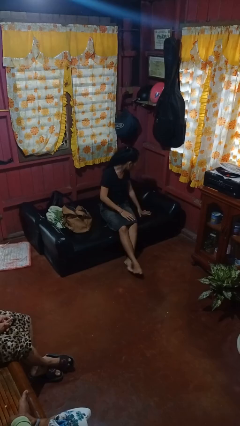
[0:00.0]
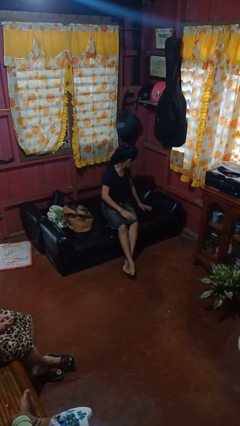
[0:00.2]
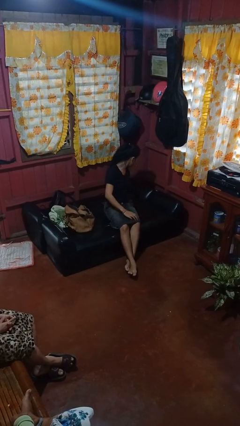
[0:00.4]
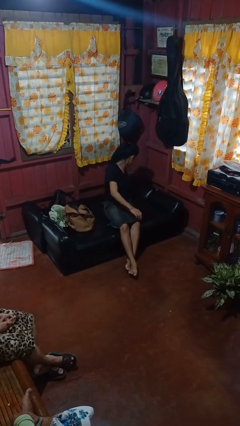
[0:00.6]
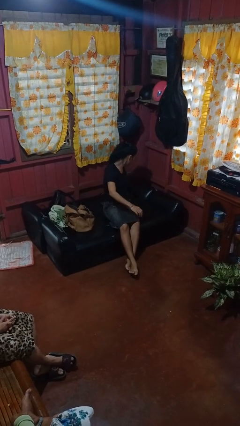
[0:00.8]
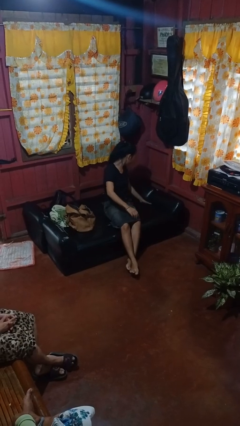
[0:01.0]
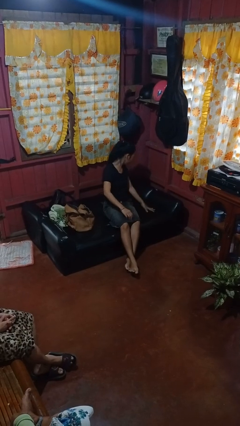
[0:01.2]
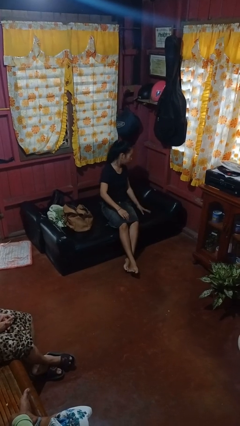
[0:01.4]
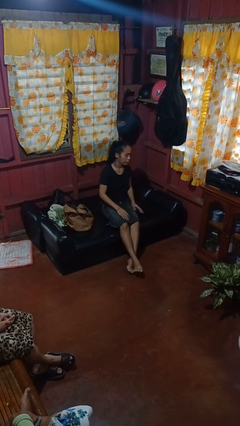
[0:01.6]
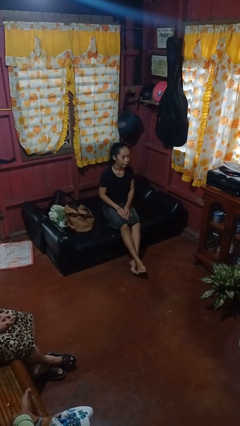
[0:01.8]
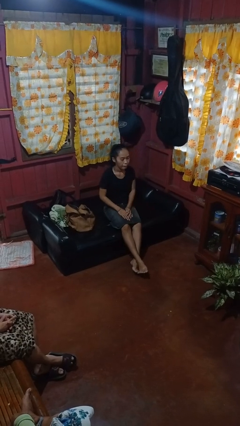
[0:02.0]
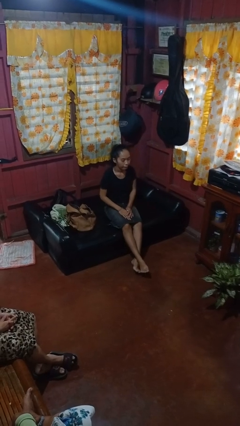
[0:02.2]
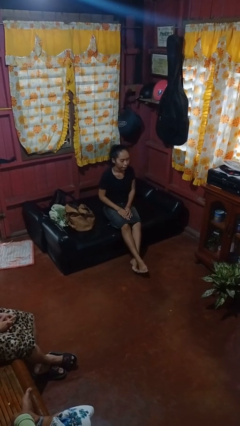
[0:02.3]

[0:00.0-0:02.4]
person searches in couch

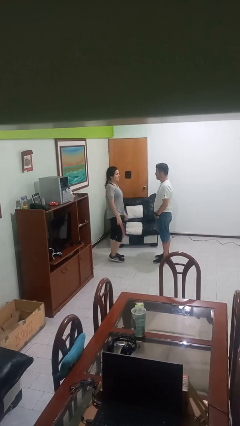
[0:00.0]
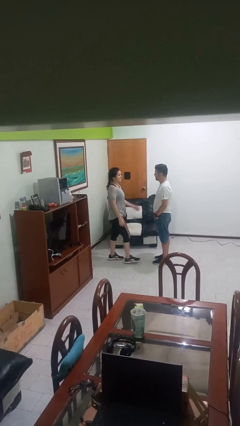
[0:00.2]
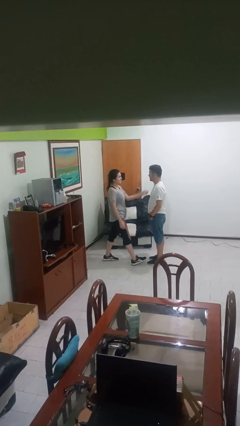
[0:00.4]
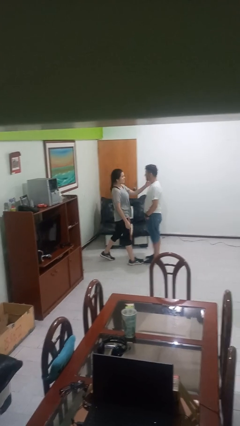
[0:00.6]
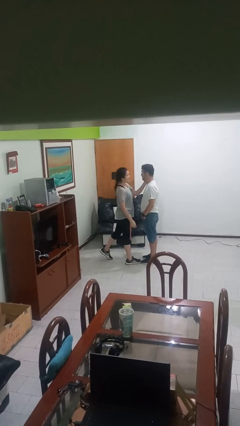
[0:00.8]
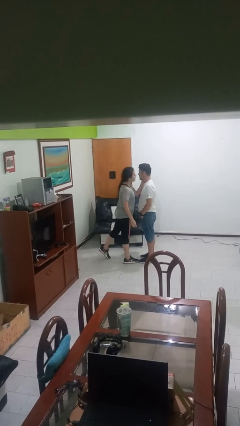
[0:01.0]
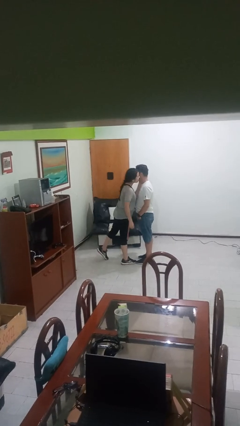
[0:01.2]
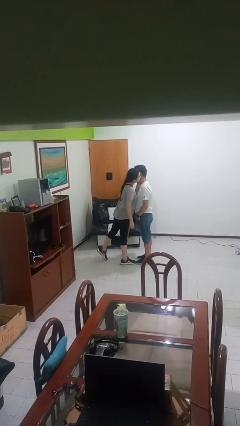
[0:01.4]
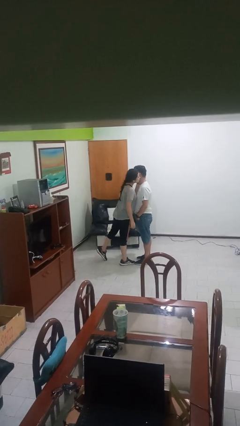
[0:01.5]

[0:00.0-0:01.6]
person kisses cheek of person

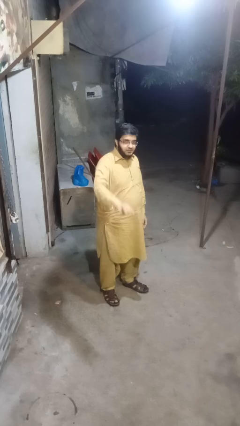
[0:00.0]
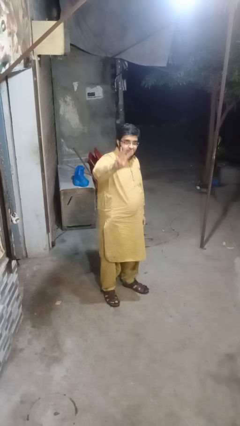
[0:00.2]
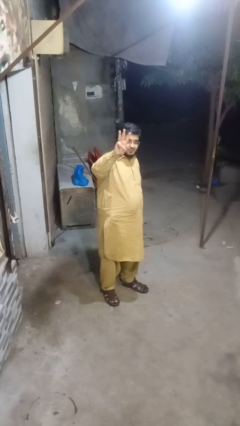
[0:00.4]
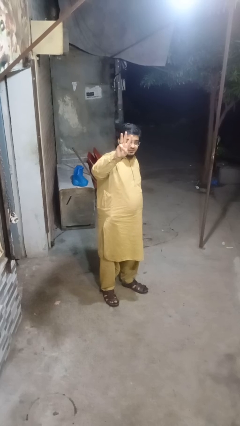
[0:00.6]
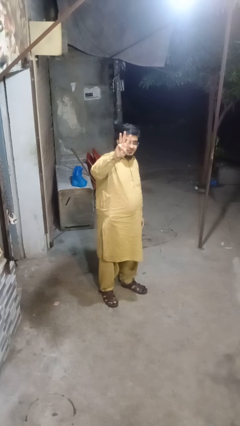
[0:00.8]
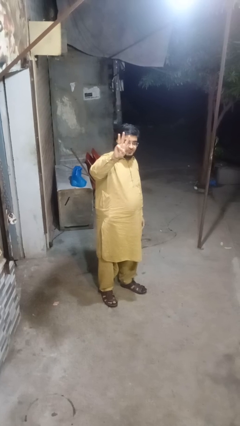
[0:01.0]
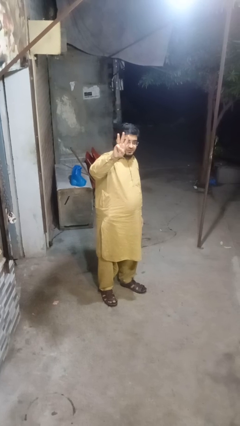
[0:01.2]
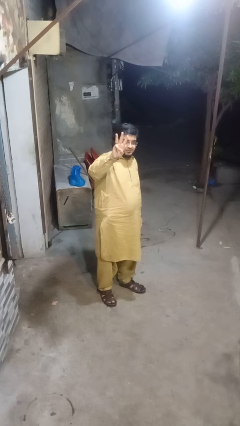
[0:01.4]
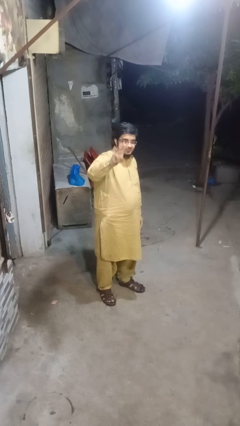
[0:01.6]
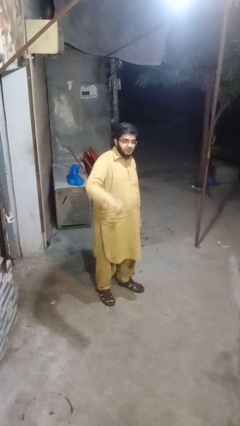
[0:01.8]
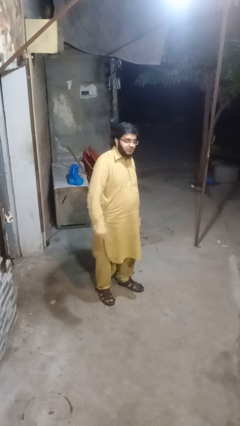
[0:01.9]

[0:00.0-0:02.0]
person gestures number three

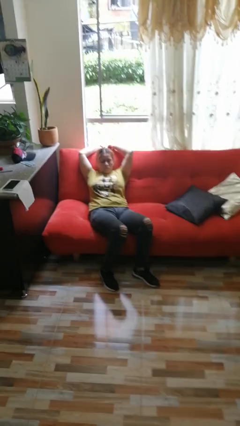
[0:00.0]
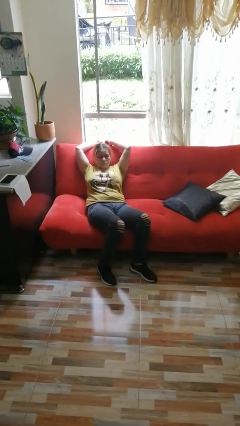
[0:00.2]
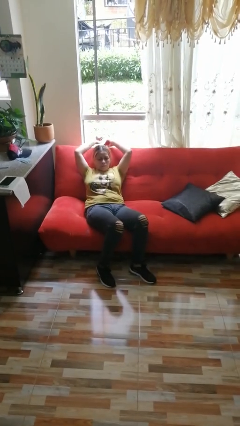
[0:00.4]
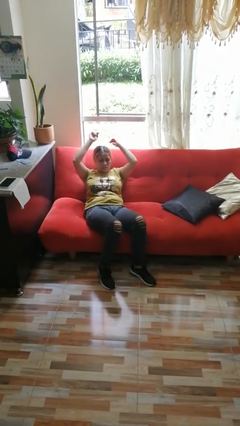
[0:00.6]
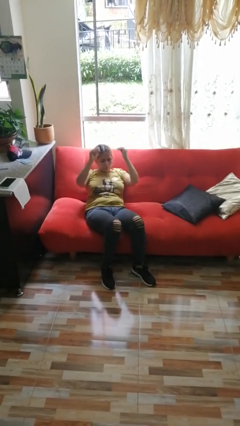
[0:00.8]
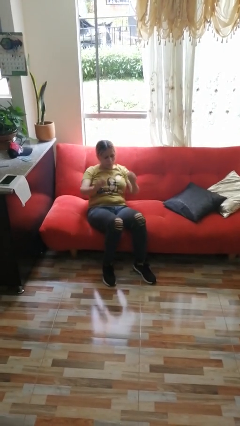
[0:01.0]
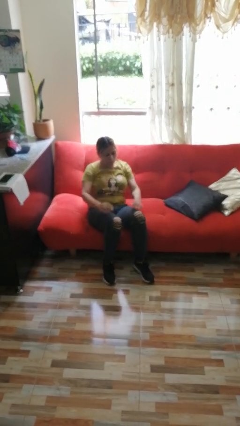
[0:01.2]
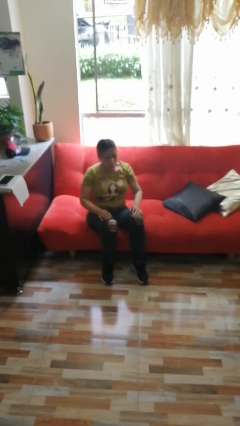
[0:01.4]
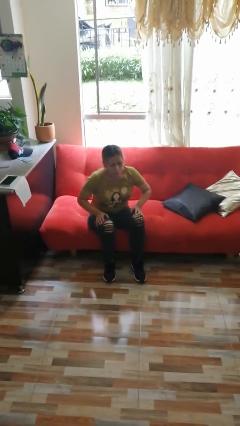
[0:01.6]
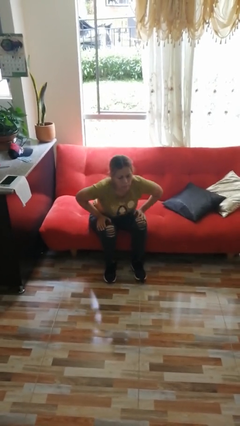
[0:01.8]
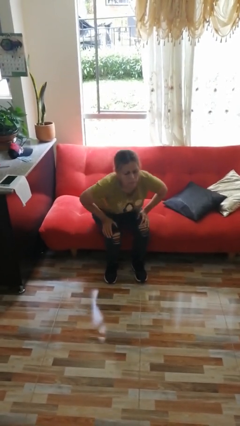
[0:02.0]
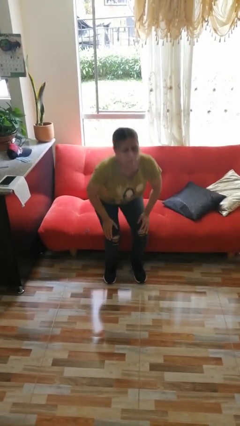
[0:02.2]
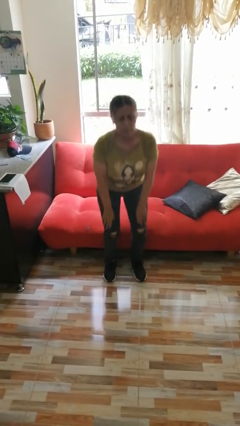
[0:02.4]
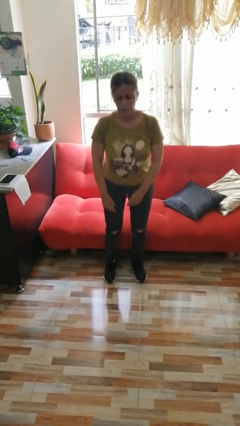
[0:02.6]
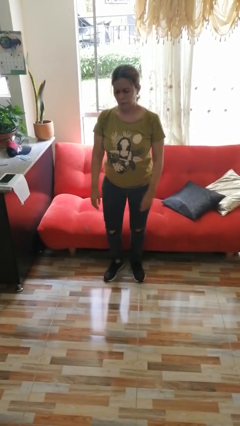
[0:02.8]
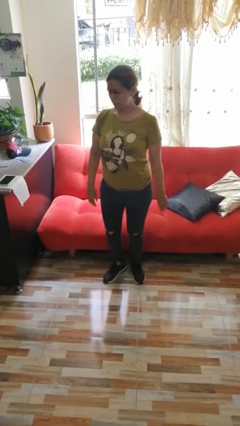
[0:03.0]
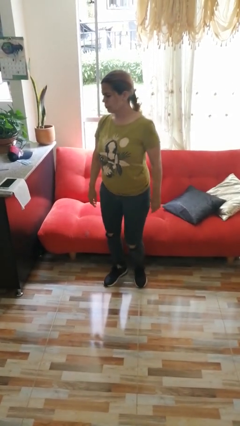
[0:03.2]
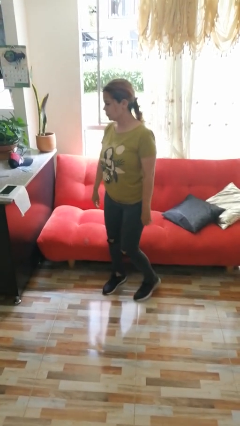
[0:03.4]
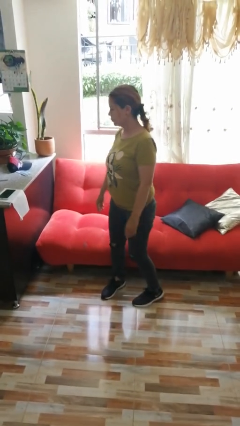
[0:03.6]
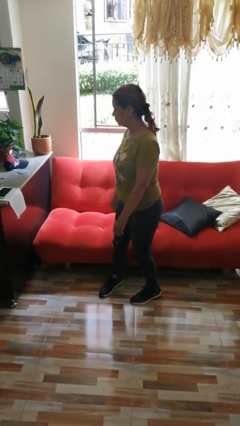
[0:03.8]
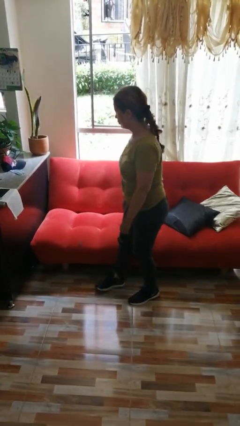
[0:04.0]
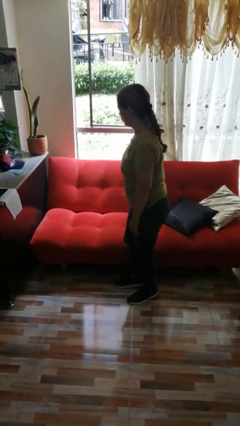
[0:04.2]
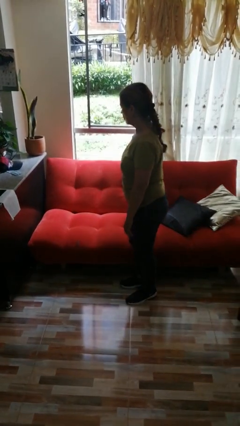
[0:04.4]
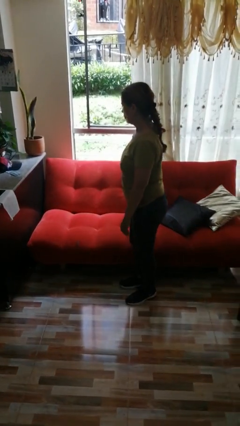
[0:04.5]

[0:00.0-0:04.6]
person stands up

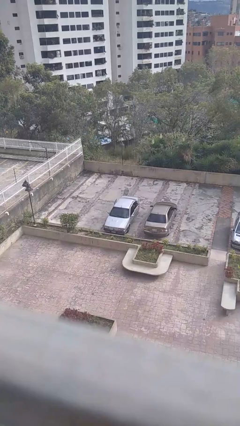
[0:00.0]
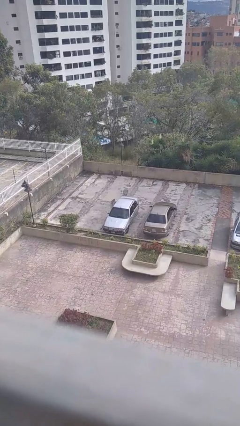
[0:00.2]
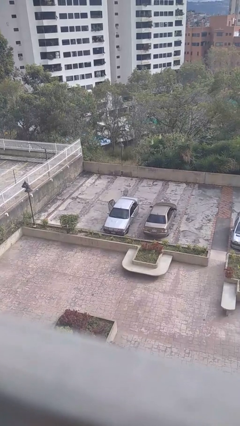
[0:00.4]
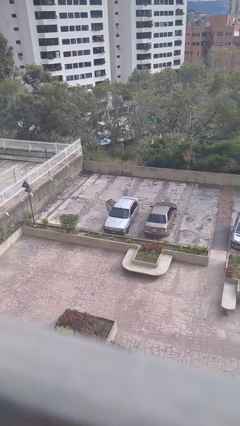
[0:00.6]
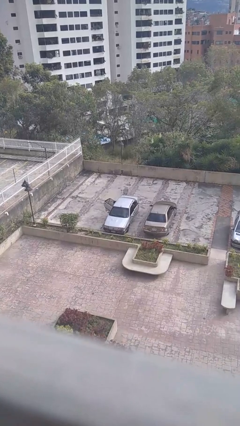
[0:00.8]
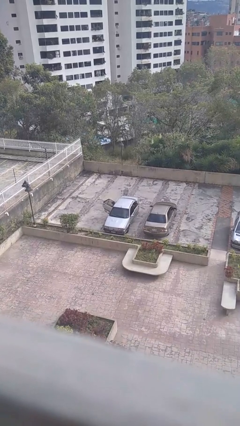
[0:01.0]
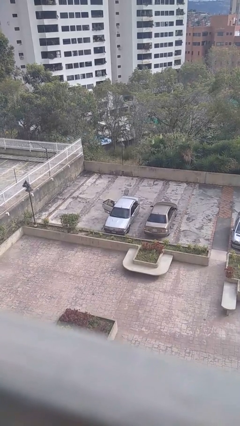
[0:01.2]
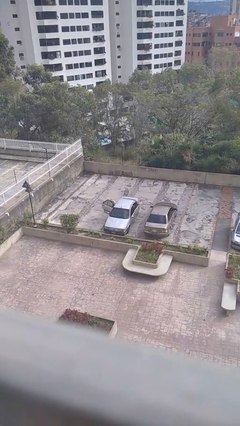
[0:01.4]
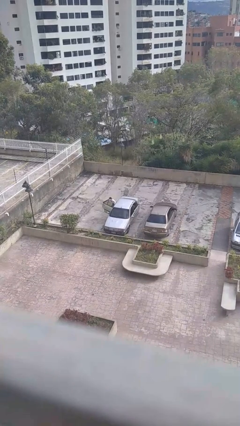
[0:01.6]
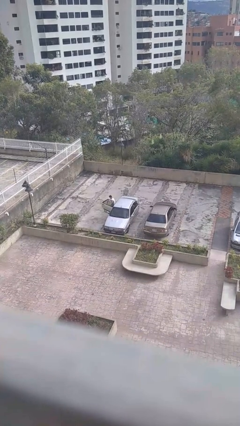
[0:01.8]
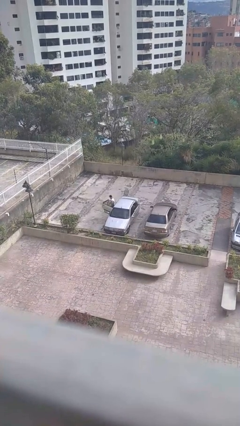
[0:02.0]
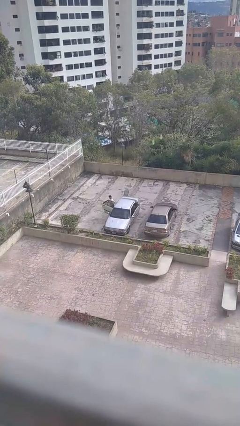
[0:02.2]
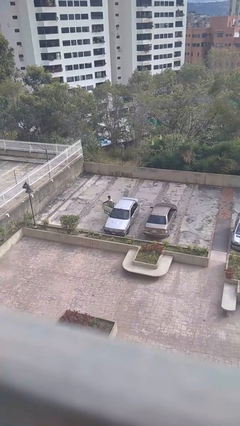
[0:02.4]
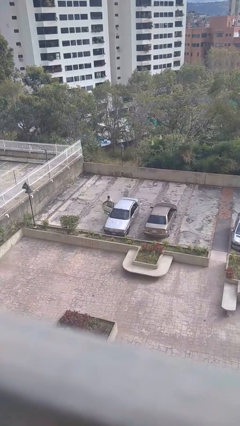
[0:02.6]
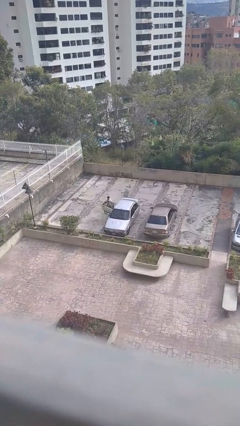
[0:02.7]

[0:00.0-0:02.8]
car drops off person

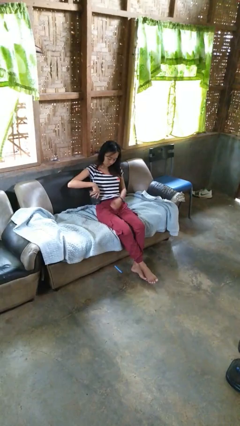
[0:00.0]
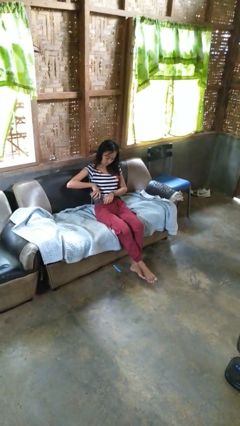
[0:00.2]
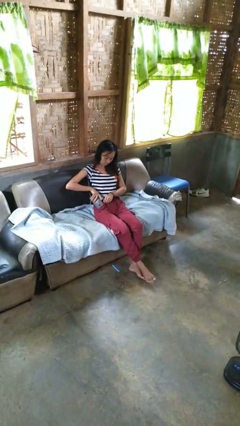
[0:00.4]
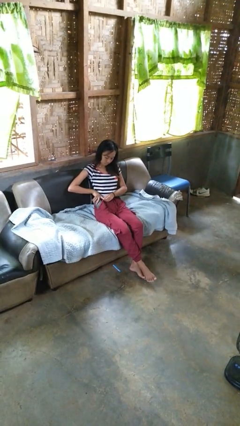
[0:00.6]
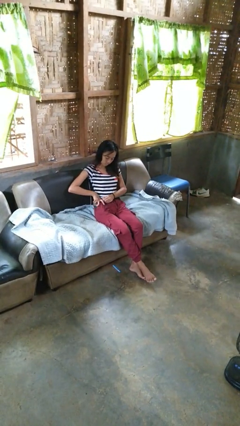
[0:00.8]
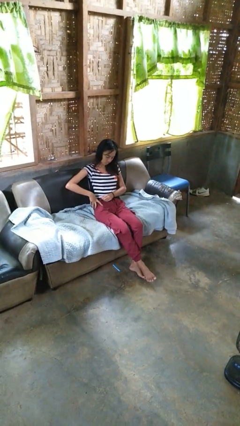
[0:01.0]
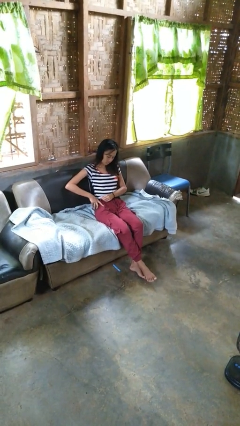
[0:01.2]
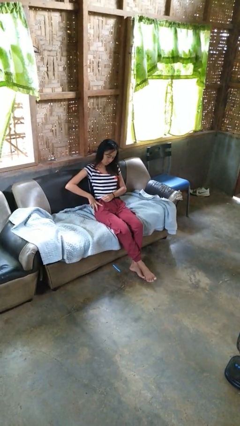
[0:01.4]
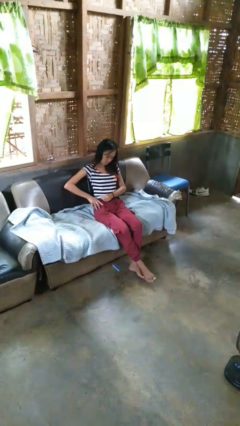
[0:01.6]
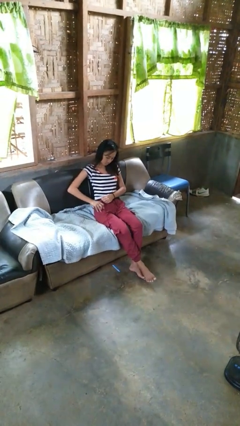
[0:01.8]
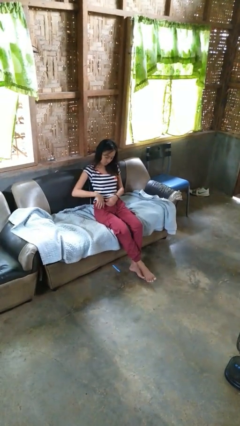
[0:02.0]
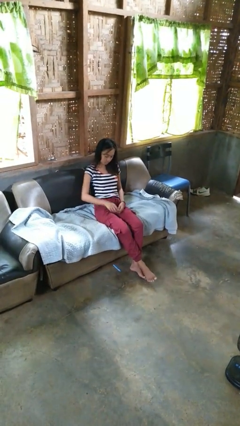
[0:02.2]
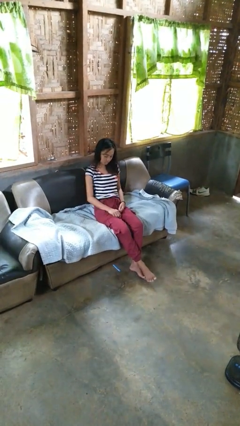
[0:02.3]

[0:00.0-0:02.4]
person puts phone into pocket

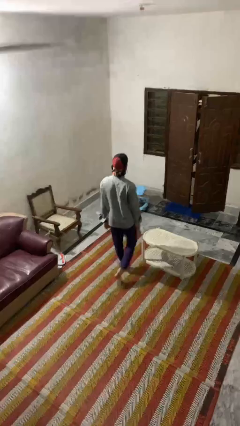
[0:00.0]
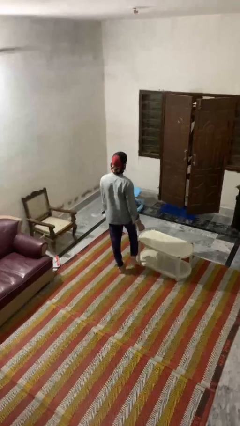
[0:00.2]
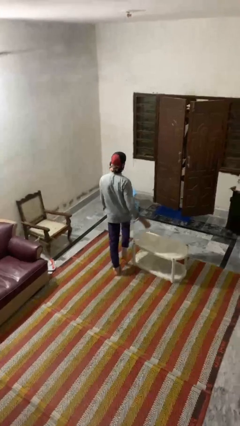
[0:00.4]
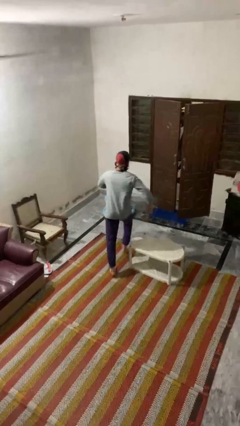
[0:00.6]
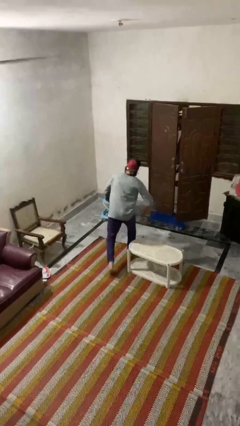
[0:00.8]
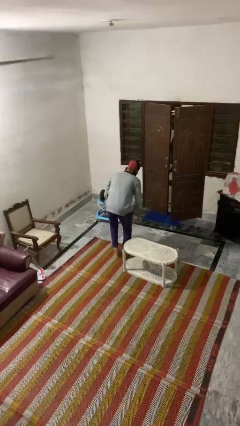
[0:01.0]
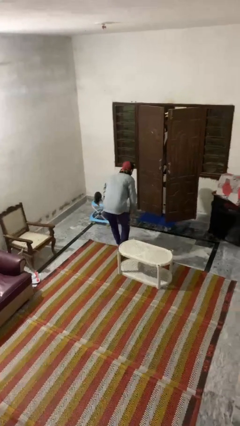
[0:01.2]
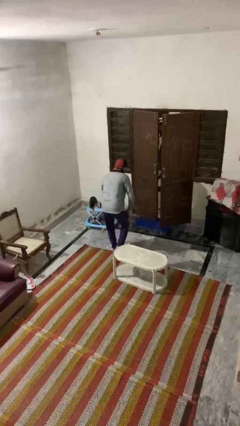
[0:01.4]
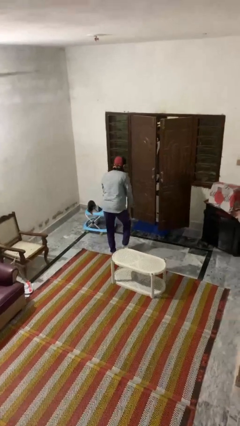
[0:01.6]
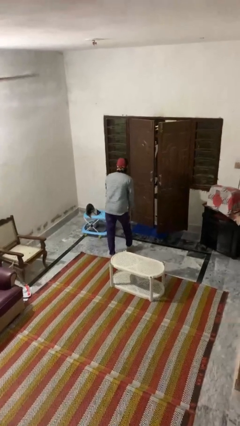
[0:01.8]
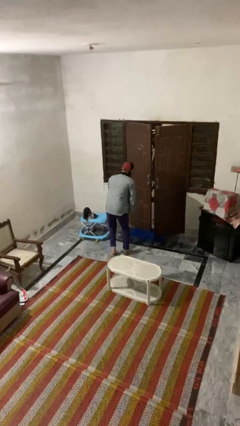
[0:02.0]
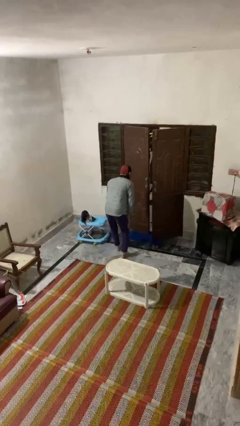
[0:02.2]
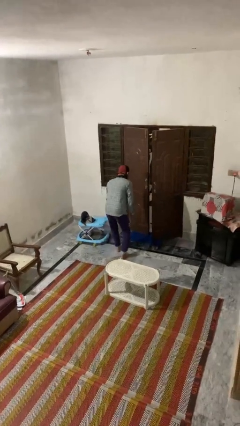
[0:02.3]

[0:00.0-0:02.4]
person bumps into table
